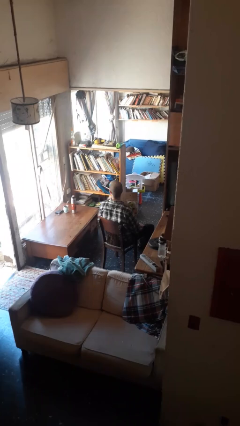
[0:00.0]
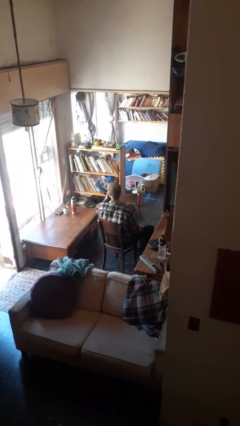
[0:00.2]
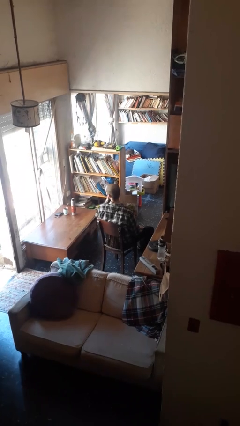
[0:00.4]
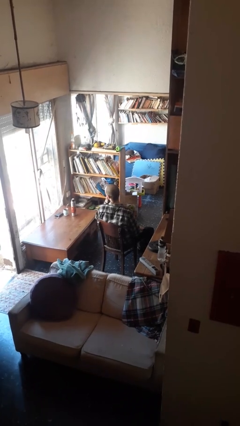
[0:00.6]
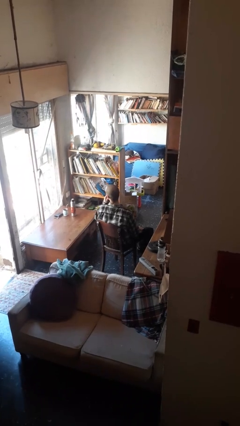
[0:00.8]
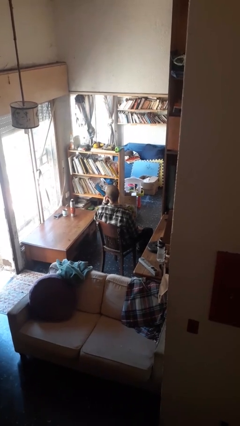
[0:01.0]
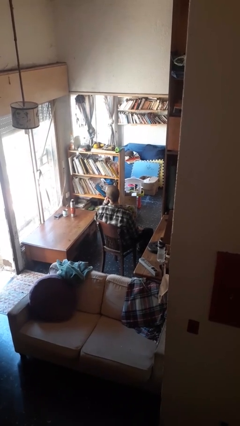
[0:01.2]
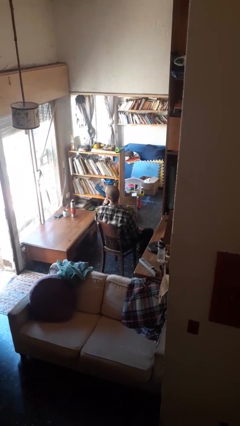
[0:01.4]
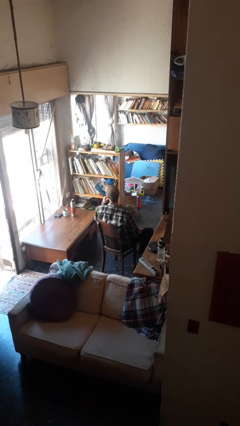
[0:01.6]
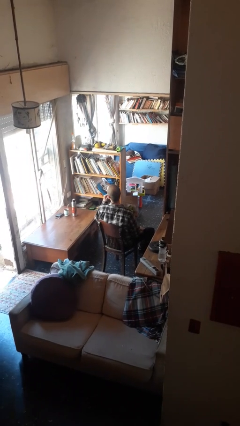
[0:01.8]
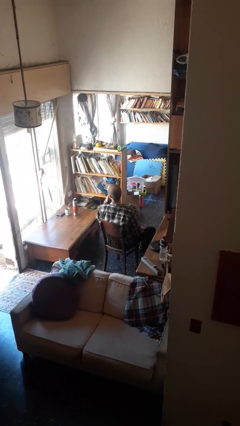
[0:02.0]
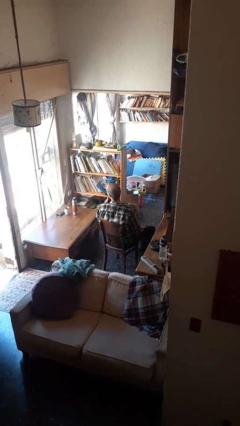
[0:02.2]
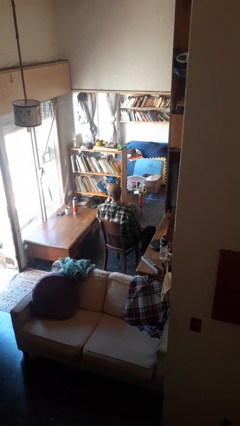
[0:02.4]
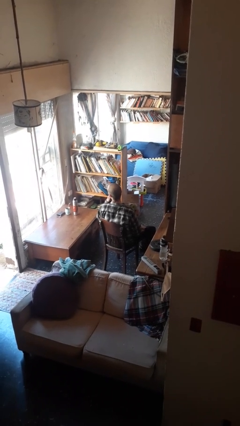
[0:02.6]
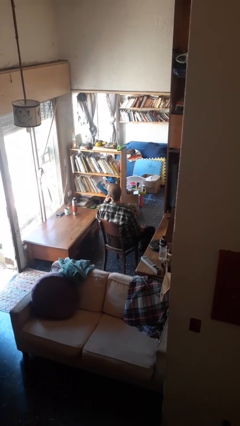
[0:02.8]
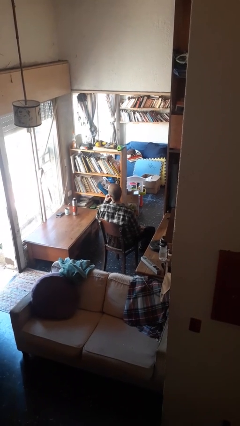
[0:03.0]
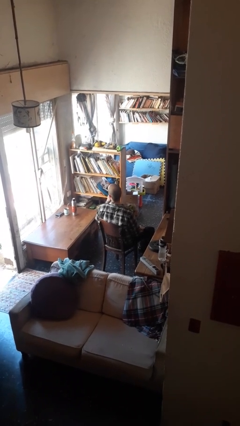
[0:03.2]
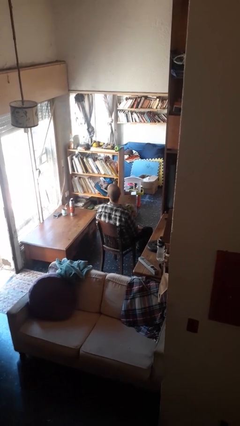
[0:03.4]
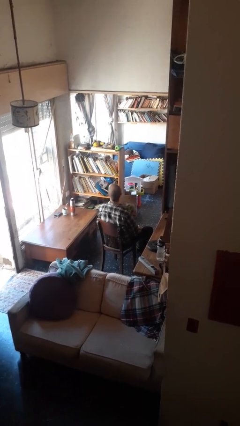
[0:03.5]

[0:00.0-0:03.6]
person strokes chin

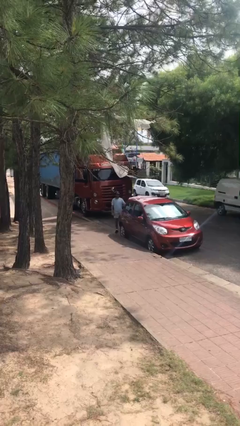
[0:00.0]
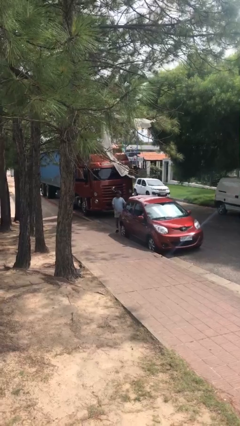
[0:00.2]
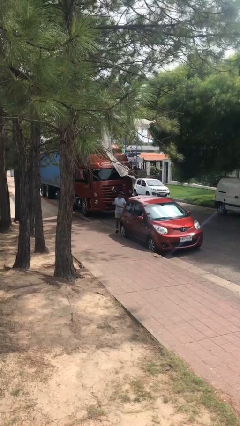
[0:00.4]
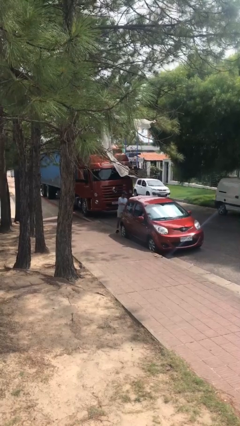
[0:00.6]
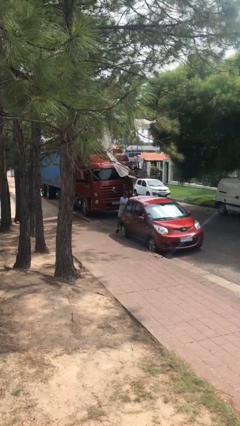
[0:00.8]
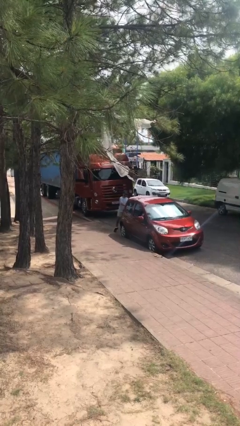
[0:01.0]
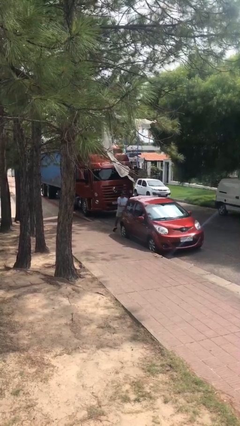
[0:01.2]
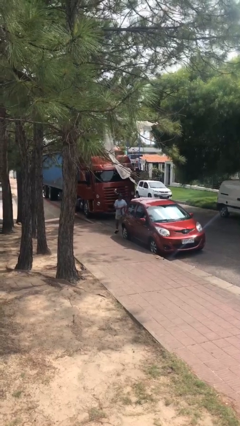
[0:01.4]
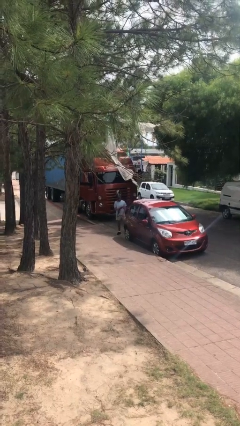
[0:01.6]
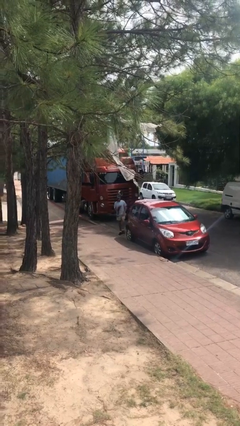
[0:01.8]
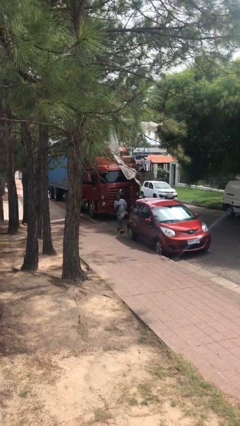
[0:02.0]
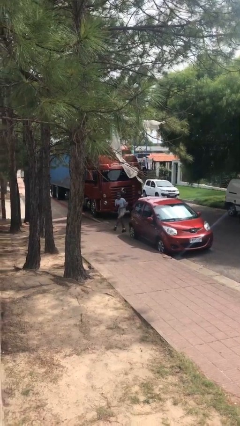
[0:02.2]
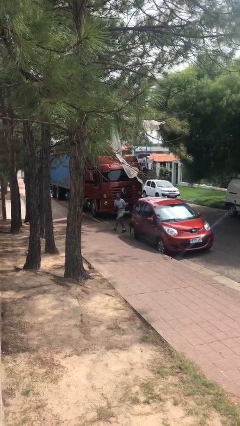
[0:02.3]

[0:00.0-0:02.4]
person unloads car

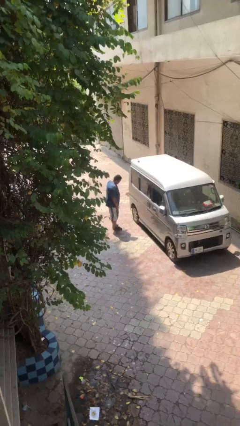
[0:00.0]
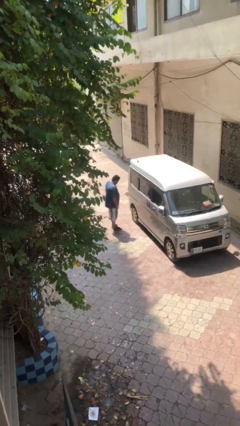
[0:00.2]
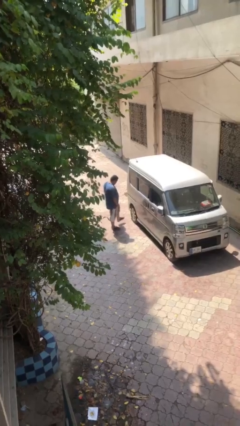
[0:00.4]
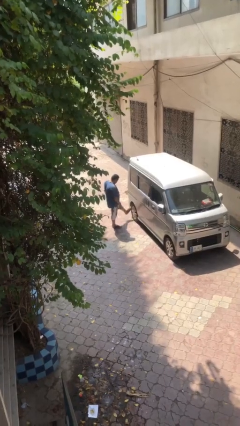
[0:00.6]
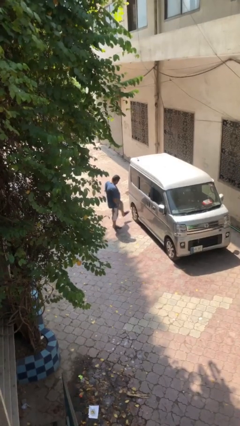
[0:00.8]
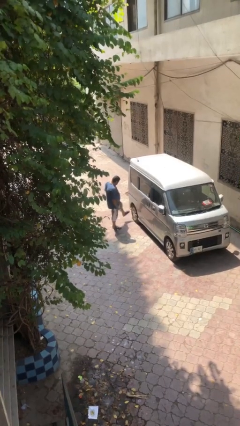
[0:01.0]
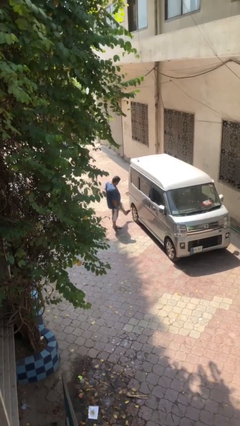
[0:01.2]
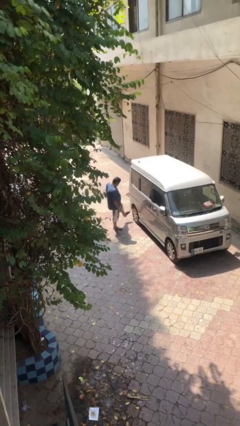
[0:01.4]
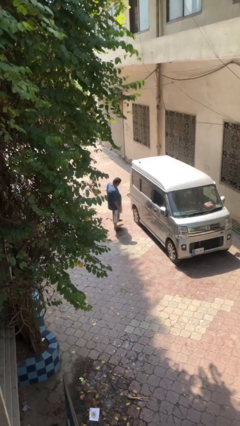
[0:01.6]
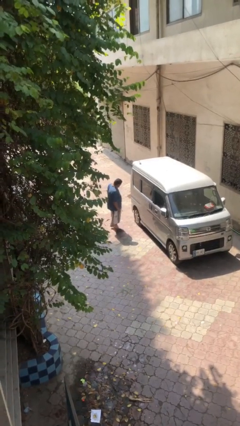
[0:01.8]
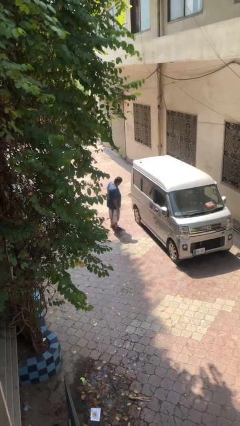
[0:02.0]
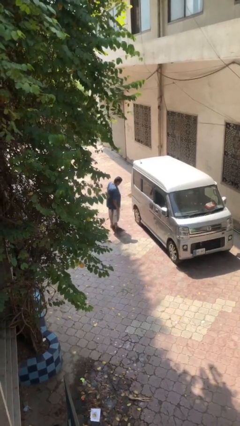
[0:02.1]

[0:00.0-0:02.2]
person kicks car tires

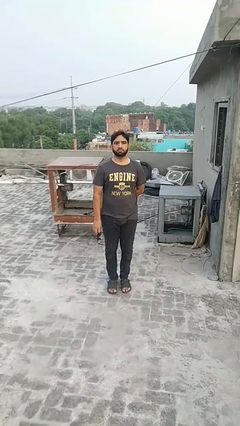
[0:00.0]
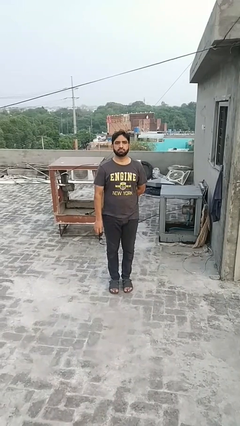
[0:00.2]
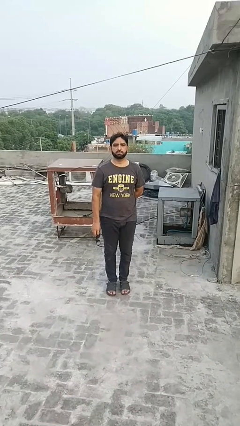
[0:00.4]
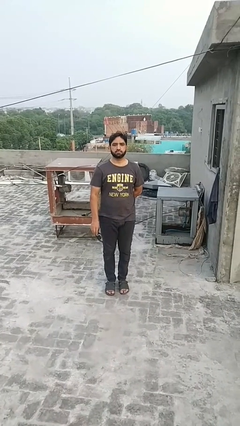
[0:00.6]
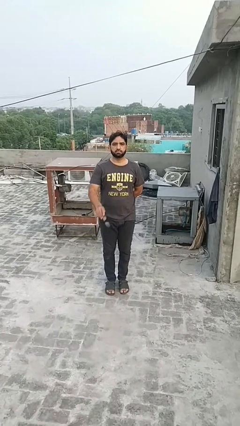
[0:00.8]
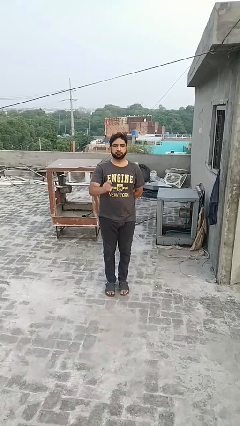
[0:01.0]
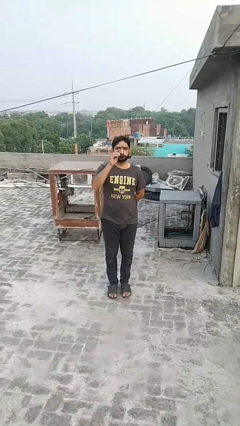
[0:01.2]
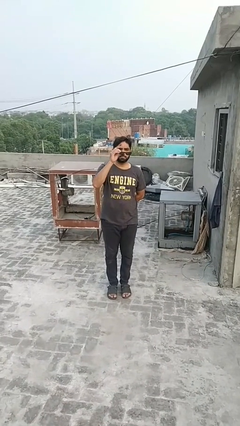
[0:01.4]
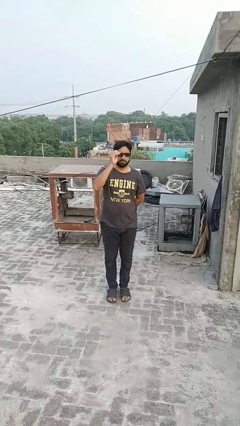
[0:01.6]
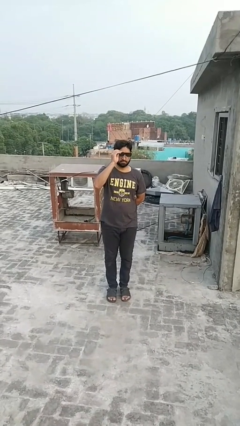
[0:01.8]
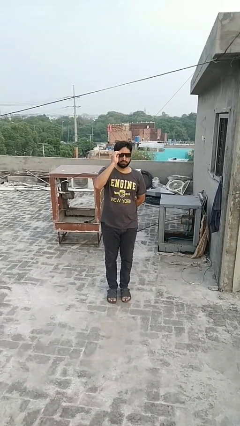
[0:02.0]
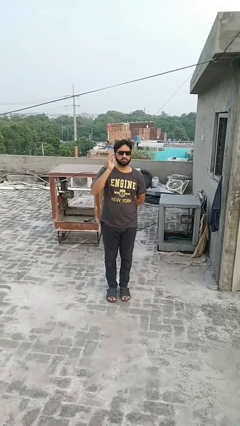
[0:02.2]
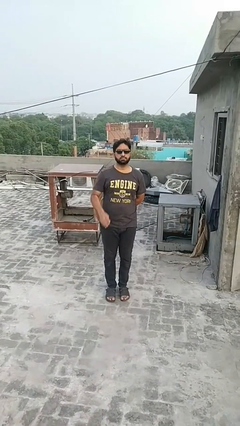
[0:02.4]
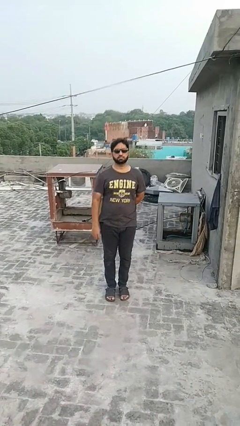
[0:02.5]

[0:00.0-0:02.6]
person puts on glasses

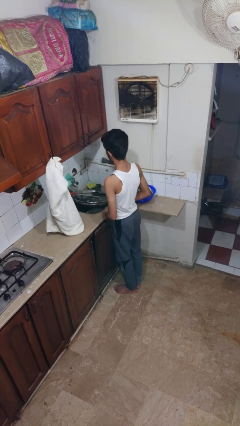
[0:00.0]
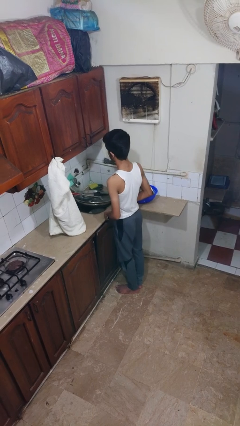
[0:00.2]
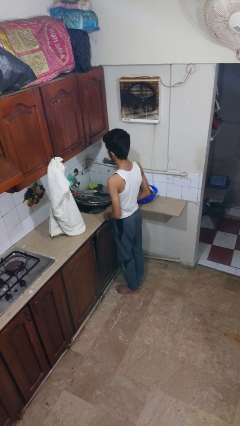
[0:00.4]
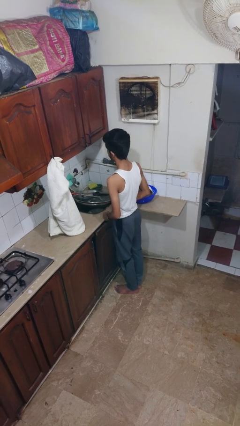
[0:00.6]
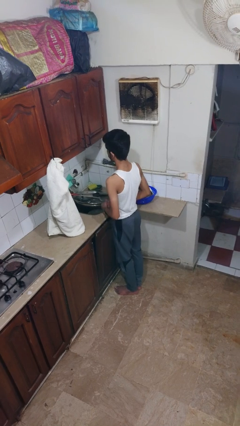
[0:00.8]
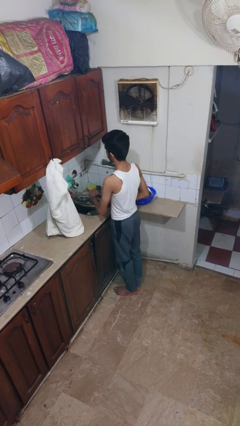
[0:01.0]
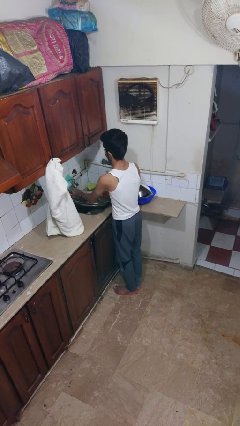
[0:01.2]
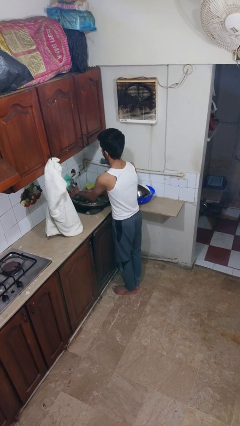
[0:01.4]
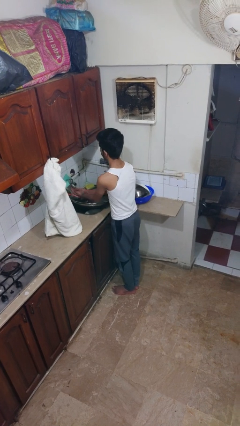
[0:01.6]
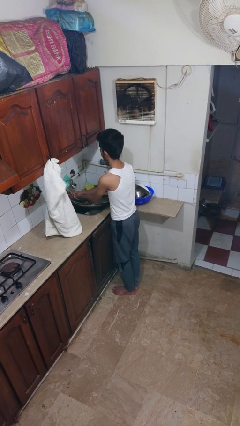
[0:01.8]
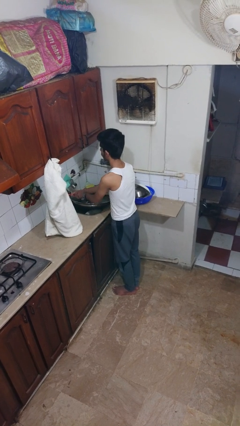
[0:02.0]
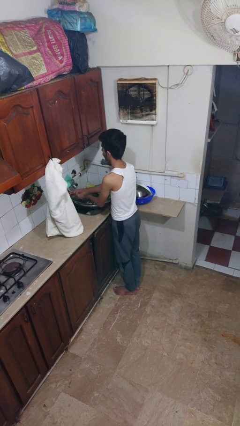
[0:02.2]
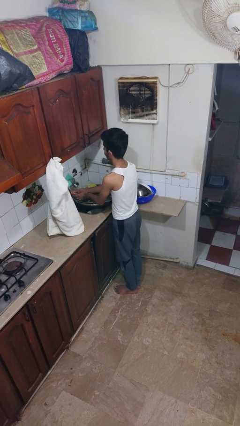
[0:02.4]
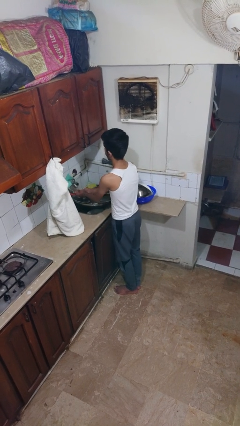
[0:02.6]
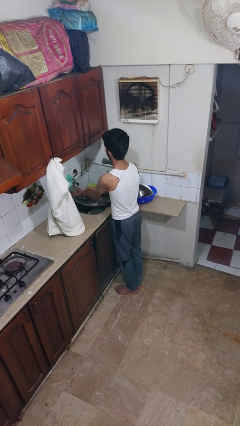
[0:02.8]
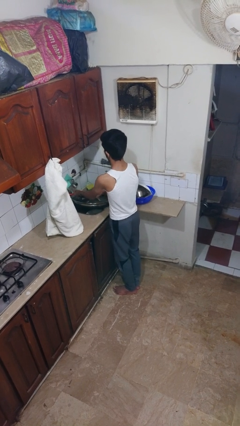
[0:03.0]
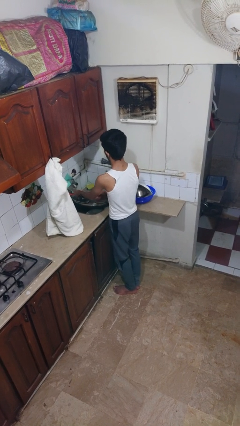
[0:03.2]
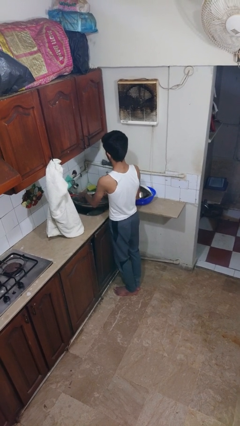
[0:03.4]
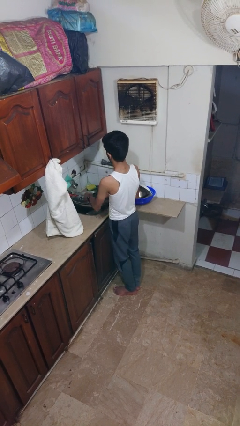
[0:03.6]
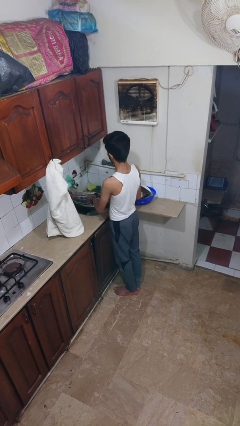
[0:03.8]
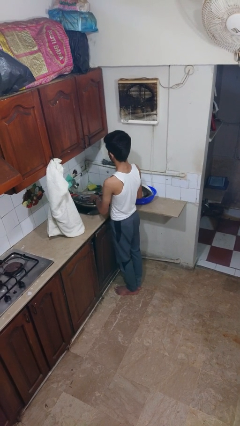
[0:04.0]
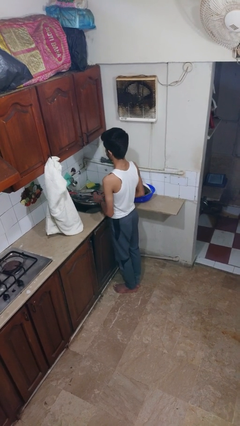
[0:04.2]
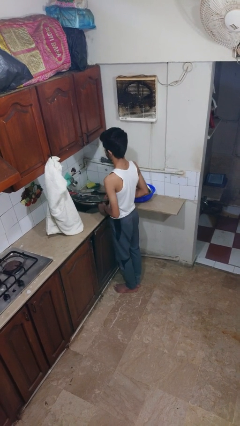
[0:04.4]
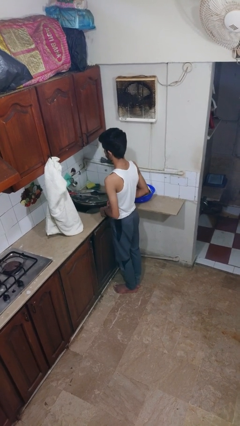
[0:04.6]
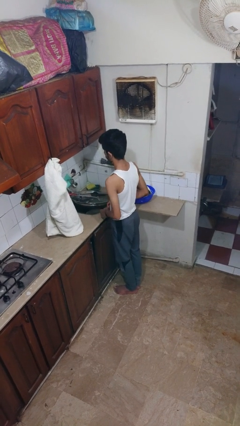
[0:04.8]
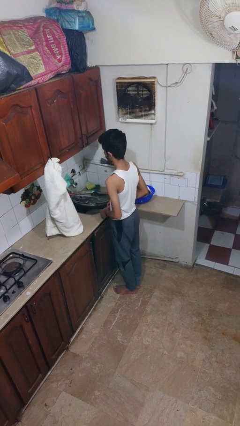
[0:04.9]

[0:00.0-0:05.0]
person washes hands

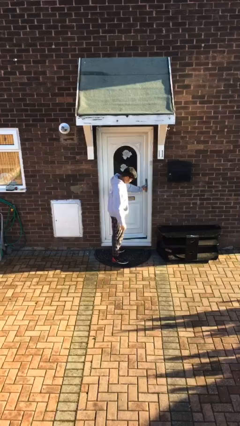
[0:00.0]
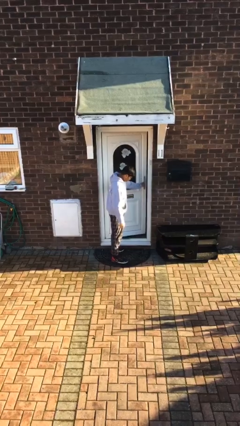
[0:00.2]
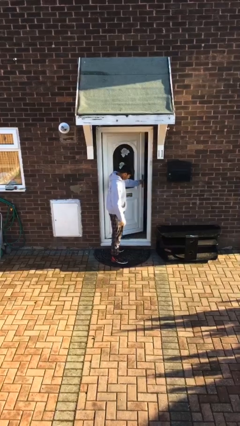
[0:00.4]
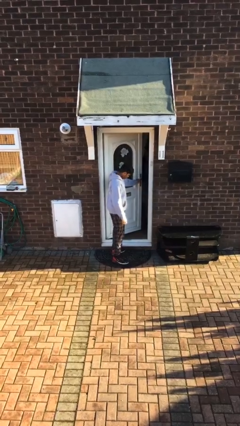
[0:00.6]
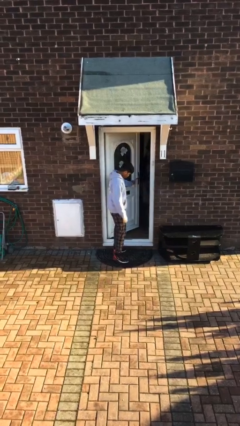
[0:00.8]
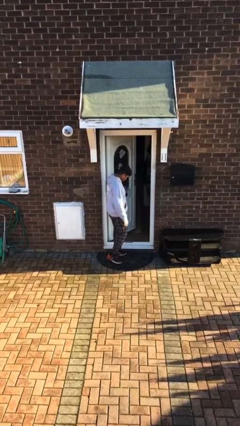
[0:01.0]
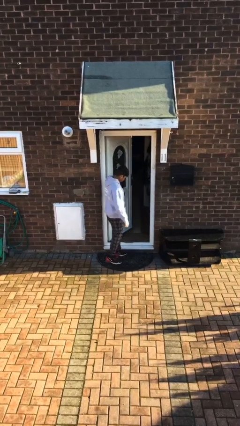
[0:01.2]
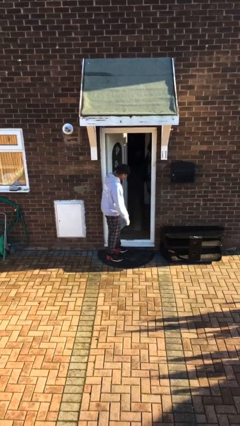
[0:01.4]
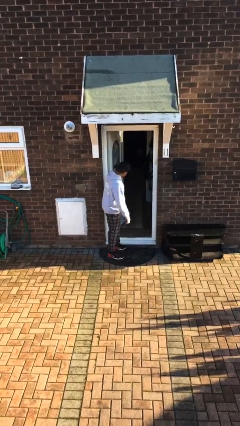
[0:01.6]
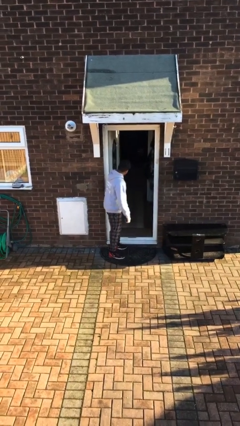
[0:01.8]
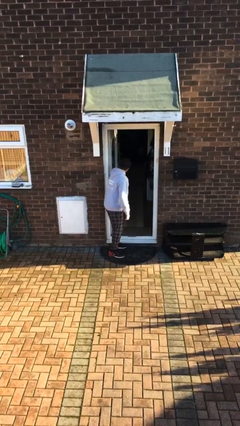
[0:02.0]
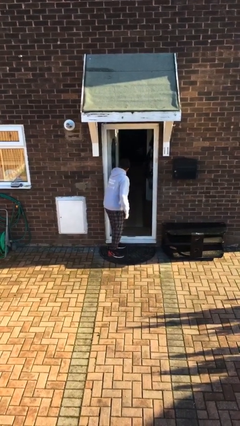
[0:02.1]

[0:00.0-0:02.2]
person opens facility door
